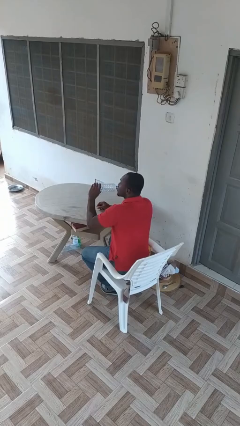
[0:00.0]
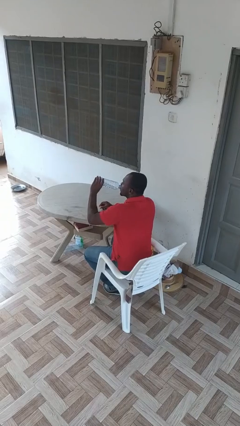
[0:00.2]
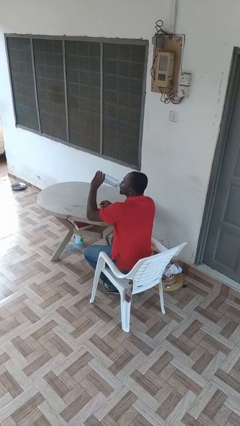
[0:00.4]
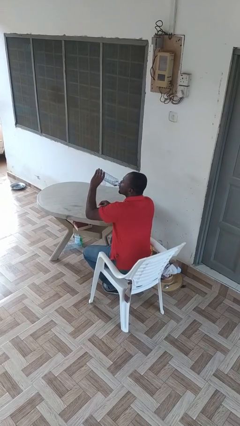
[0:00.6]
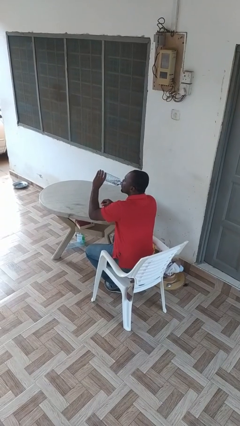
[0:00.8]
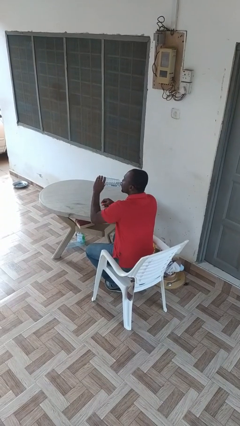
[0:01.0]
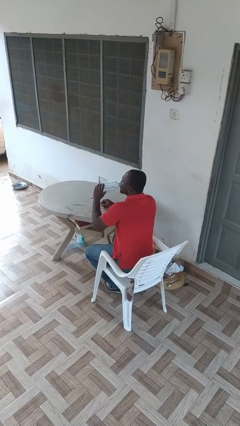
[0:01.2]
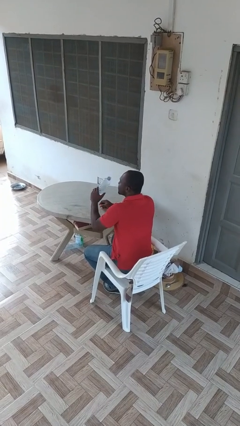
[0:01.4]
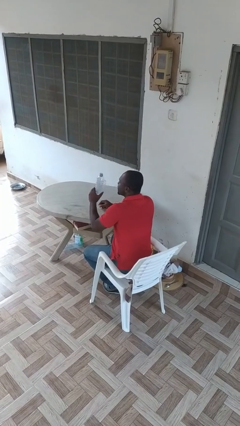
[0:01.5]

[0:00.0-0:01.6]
person drinks from bottle

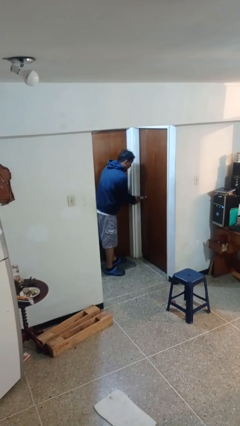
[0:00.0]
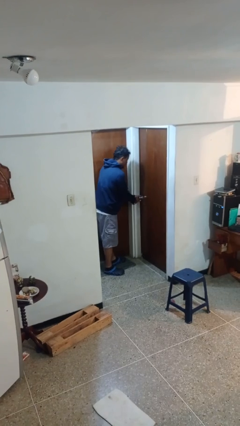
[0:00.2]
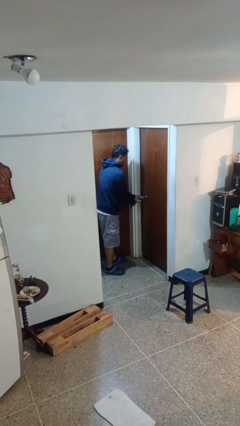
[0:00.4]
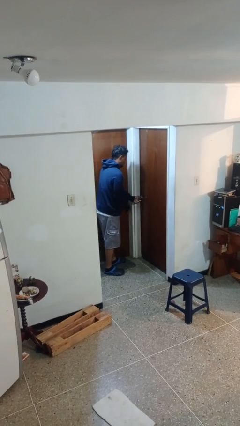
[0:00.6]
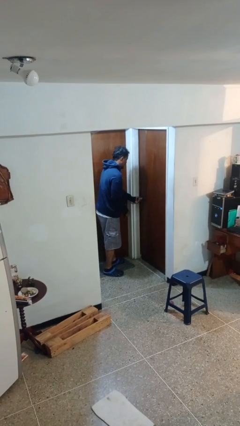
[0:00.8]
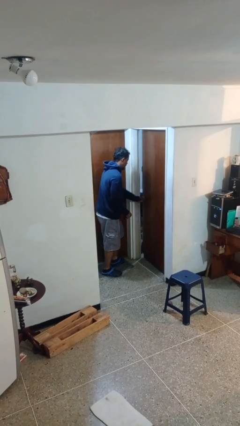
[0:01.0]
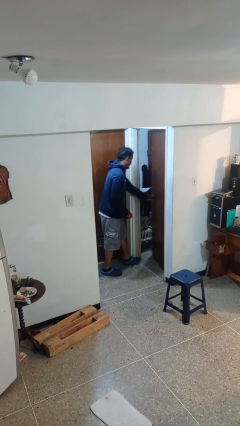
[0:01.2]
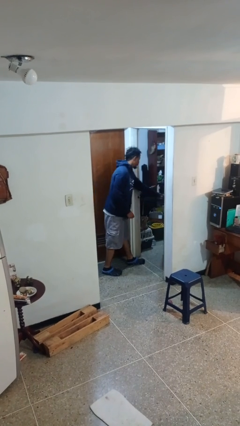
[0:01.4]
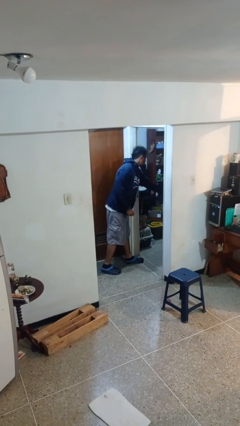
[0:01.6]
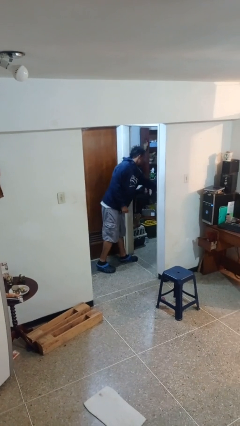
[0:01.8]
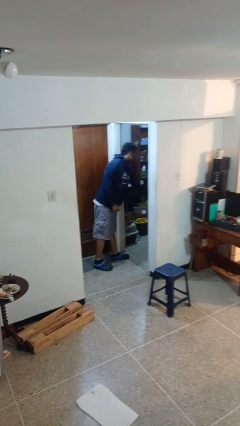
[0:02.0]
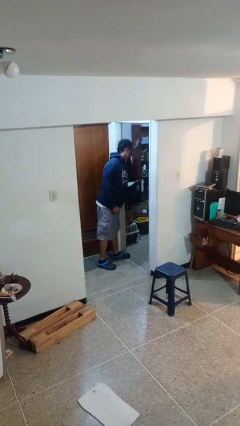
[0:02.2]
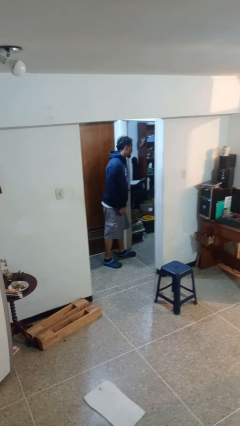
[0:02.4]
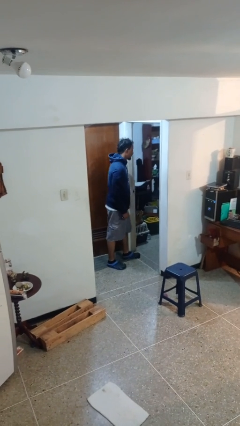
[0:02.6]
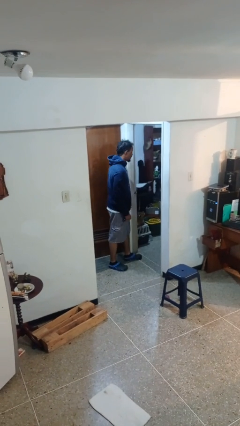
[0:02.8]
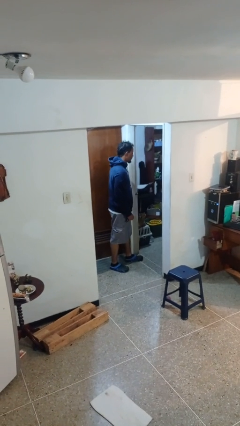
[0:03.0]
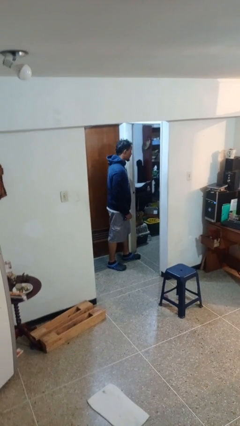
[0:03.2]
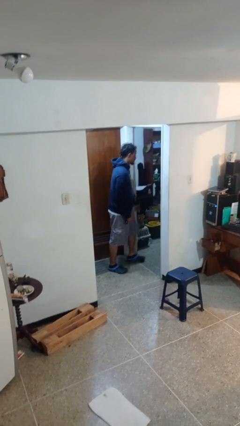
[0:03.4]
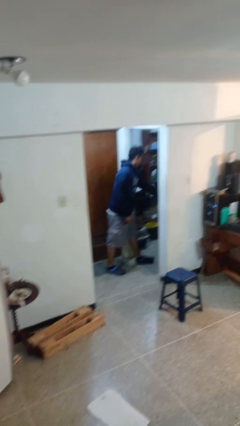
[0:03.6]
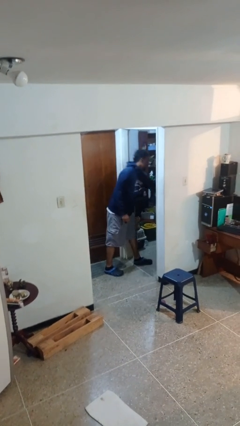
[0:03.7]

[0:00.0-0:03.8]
person opens facility door

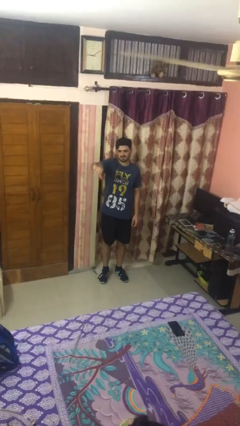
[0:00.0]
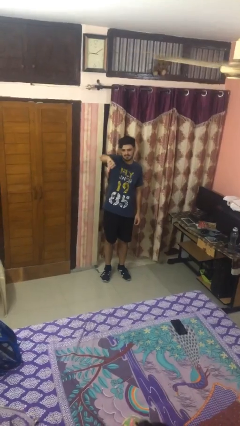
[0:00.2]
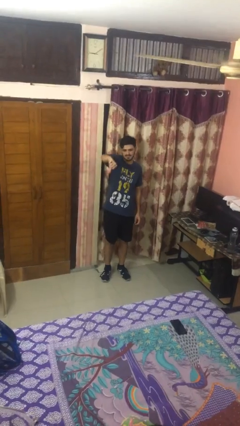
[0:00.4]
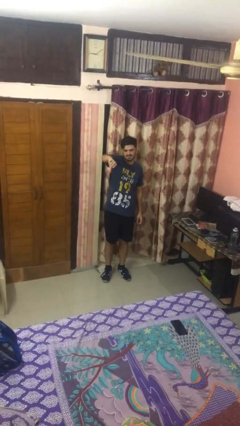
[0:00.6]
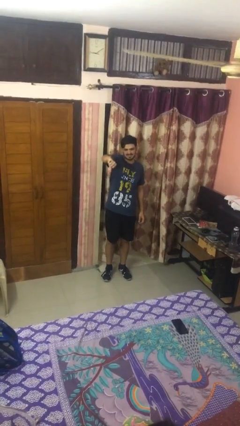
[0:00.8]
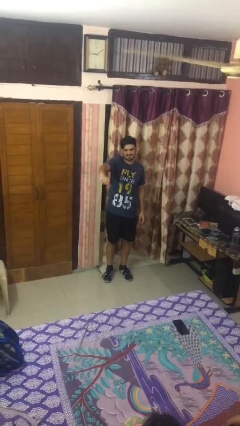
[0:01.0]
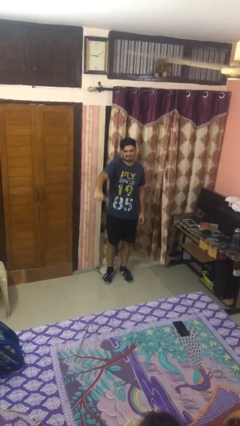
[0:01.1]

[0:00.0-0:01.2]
person gestures thumbs down

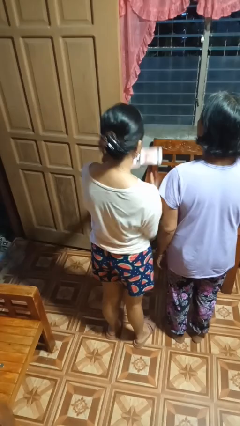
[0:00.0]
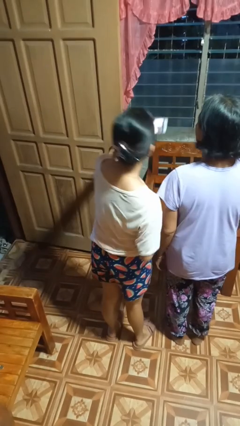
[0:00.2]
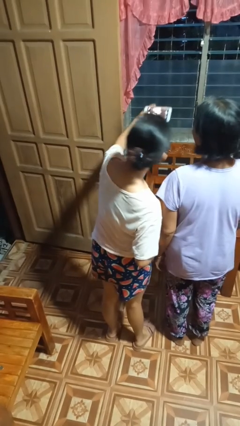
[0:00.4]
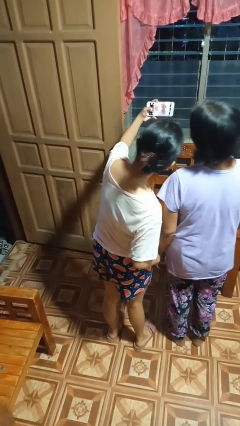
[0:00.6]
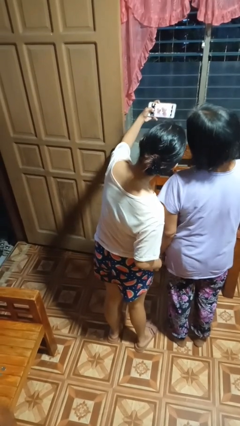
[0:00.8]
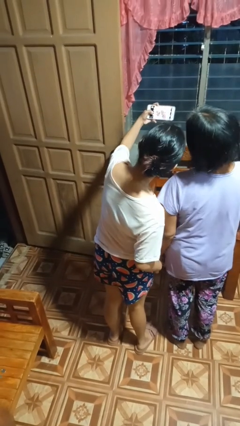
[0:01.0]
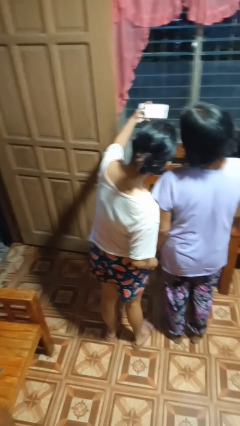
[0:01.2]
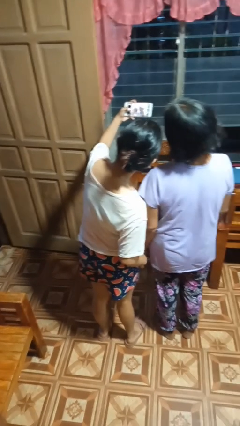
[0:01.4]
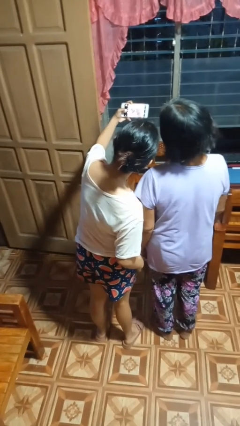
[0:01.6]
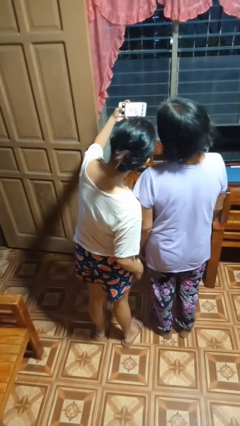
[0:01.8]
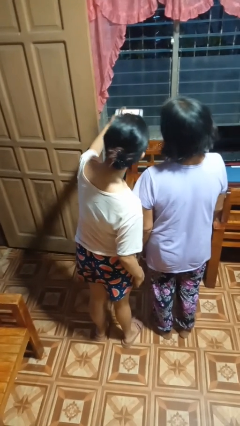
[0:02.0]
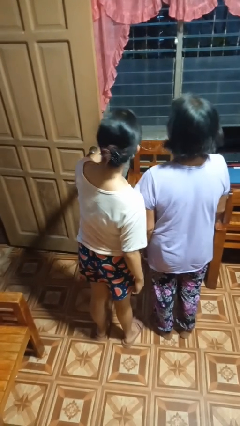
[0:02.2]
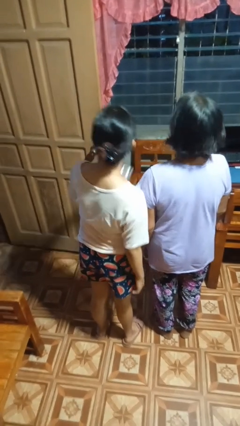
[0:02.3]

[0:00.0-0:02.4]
person takes selfie with person

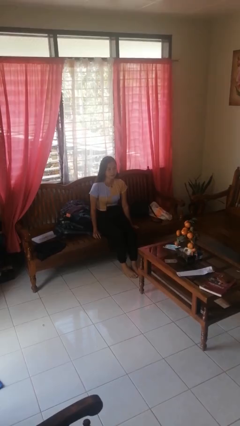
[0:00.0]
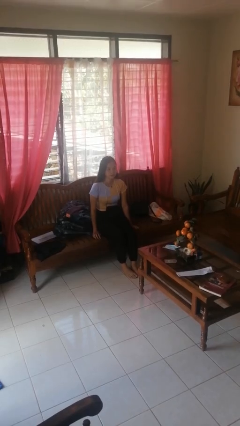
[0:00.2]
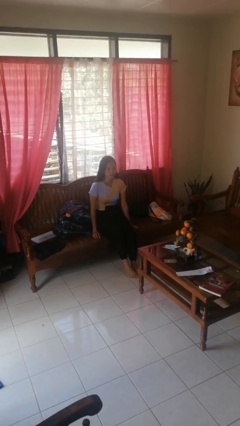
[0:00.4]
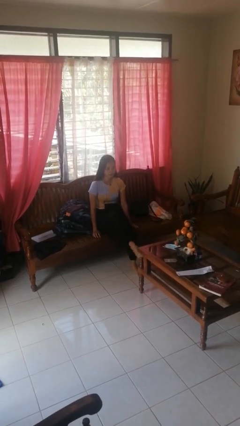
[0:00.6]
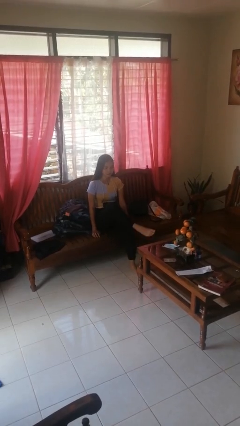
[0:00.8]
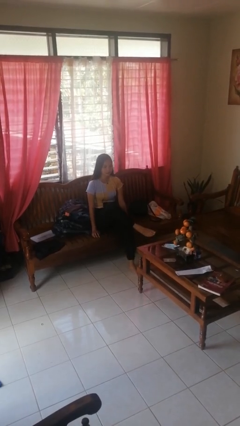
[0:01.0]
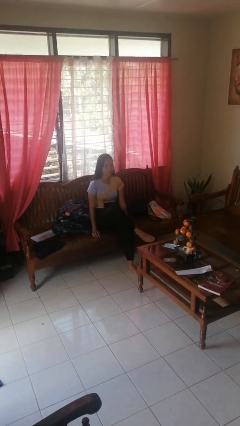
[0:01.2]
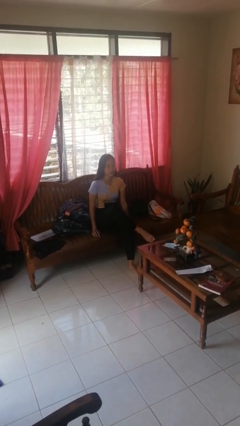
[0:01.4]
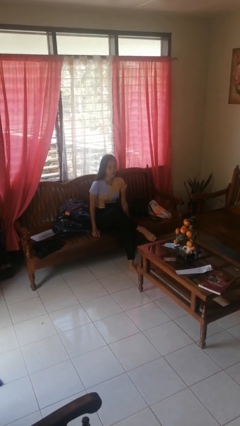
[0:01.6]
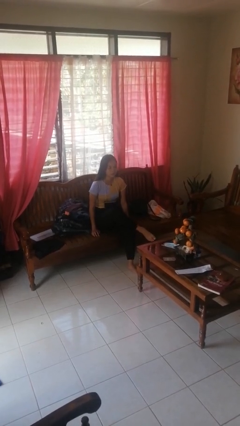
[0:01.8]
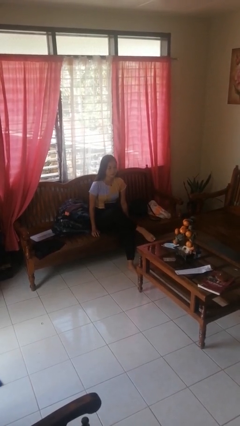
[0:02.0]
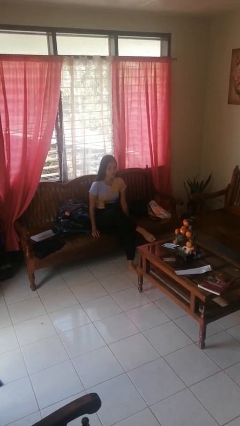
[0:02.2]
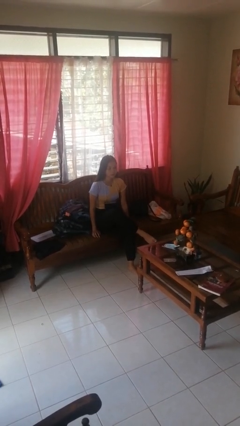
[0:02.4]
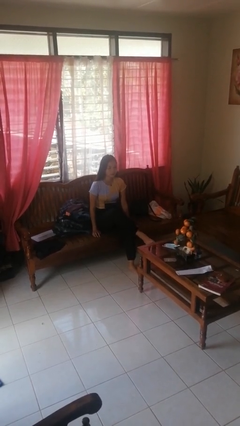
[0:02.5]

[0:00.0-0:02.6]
person crosses legs

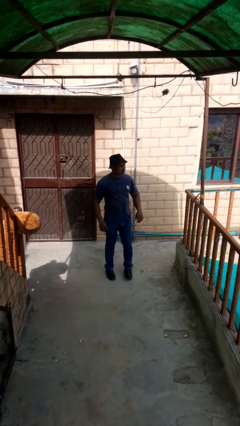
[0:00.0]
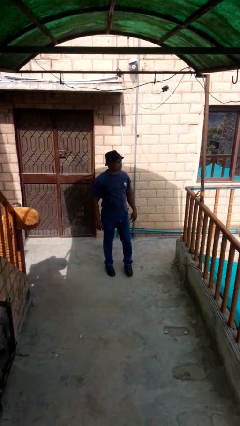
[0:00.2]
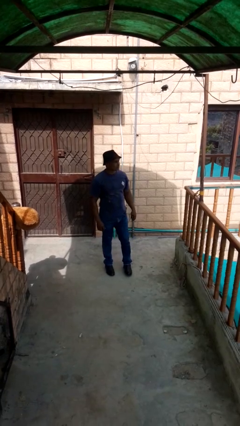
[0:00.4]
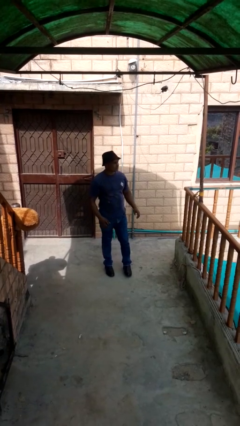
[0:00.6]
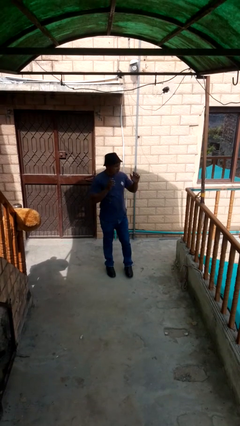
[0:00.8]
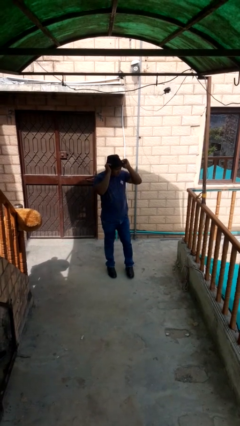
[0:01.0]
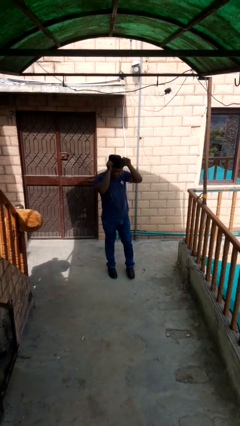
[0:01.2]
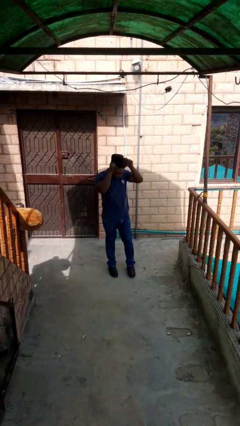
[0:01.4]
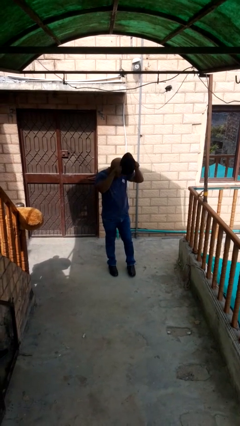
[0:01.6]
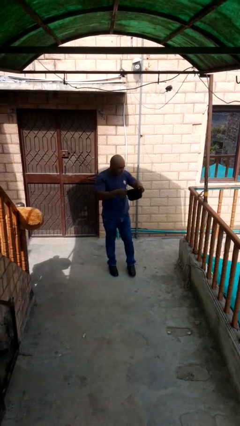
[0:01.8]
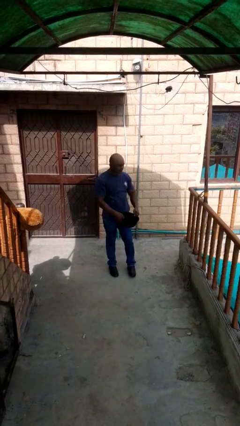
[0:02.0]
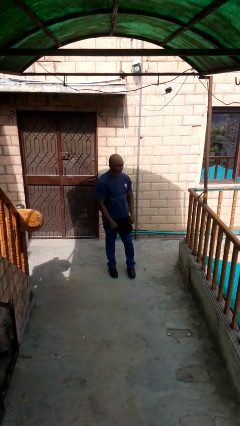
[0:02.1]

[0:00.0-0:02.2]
person takes off hat

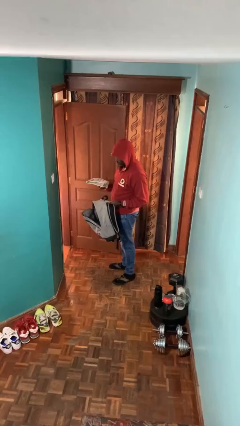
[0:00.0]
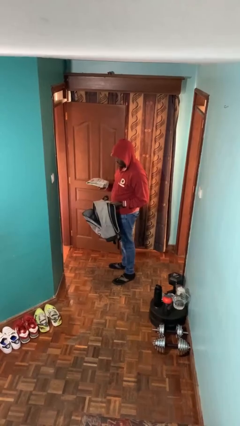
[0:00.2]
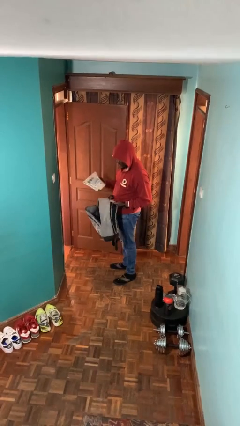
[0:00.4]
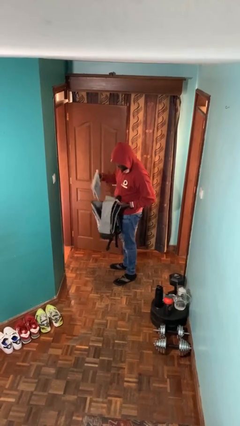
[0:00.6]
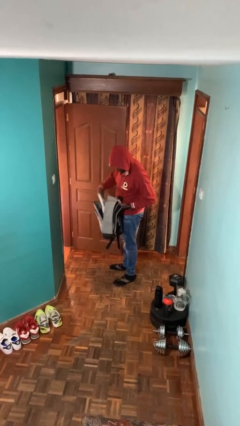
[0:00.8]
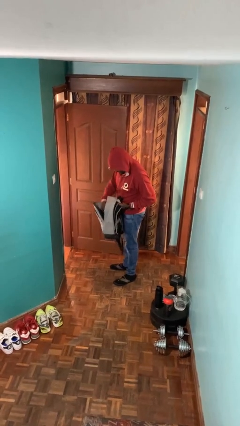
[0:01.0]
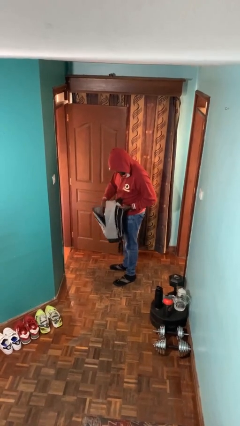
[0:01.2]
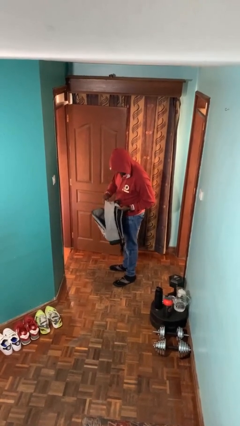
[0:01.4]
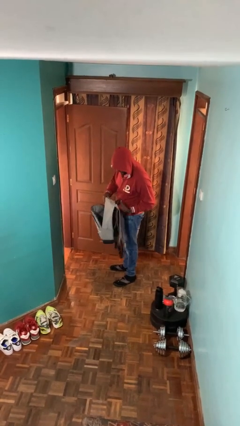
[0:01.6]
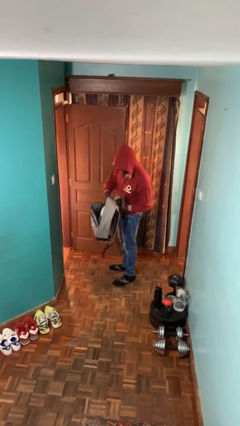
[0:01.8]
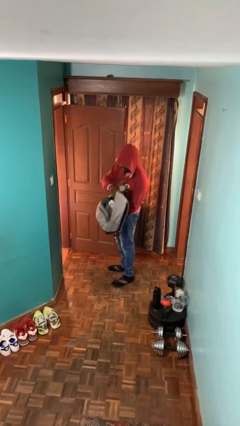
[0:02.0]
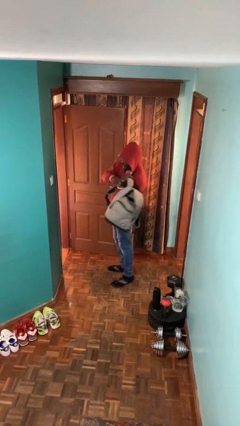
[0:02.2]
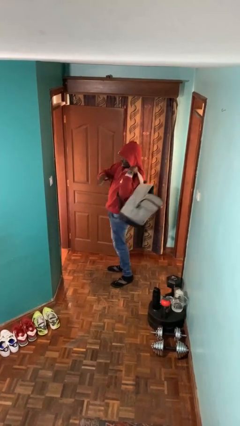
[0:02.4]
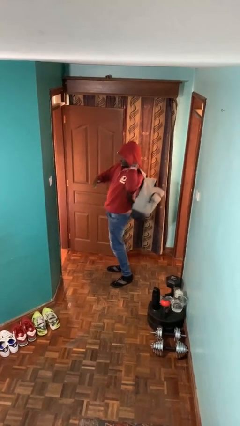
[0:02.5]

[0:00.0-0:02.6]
person puts object into backpack

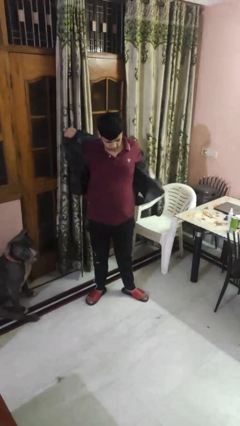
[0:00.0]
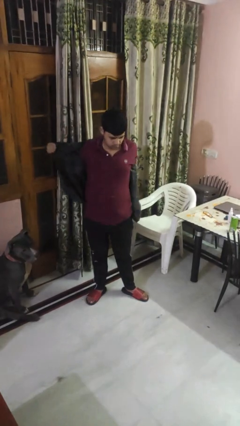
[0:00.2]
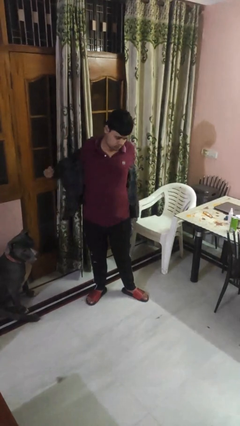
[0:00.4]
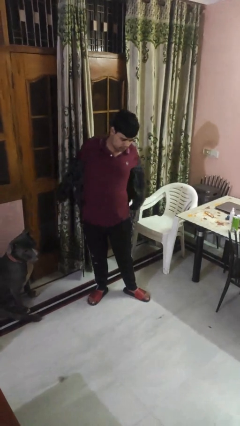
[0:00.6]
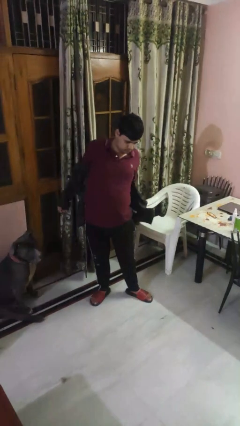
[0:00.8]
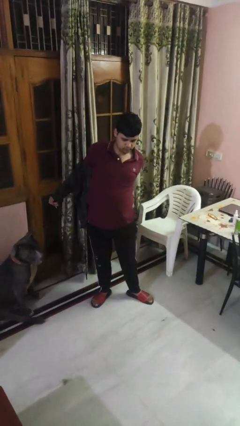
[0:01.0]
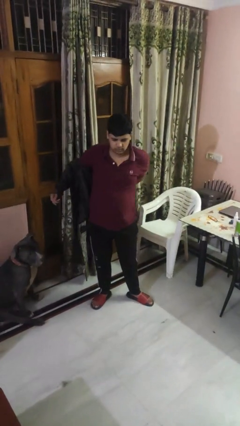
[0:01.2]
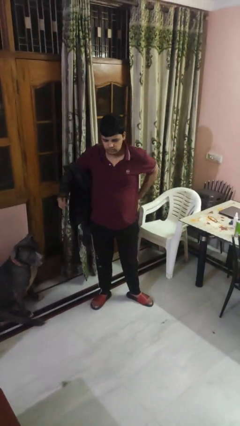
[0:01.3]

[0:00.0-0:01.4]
person takes off shirt
